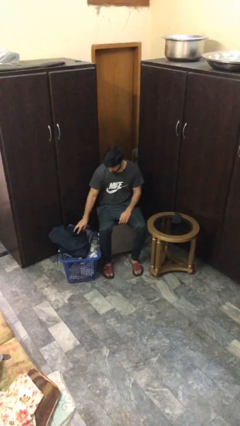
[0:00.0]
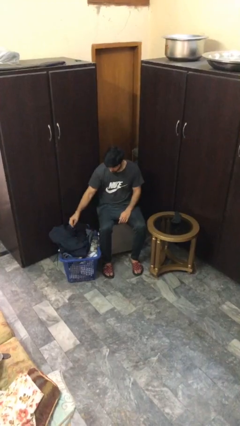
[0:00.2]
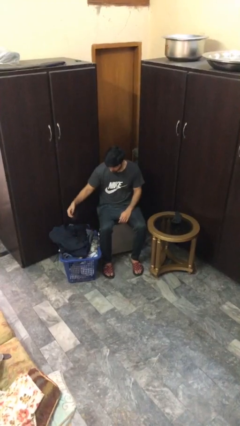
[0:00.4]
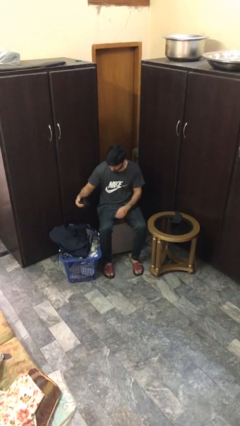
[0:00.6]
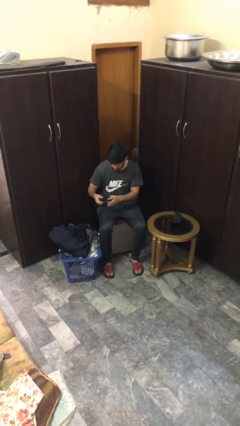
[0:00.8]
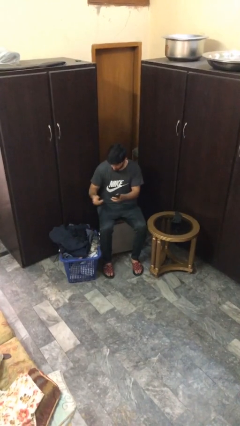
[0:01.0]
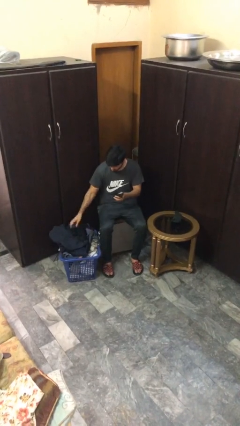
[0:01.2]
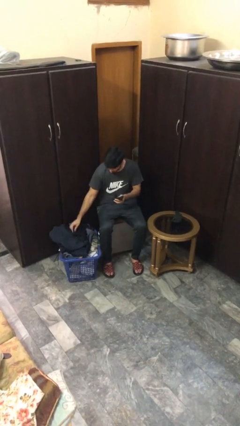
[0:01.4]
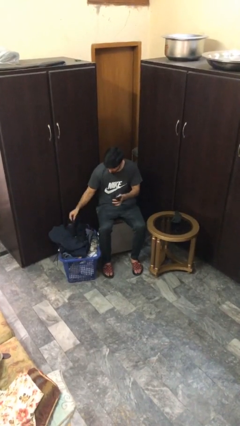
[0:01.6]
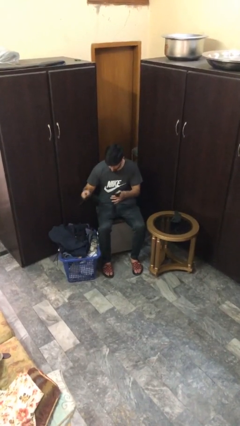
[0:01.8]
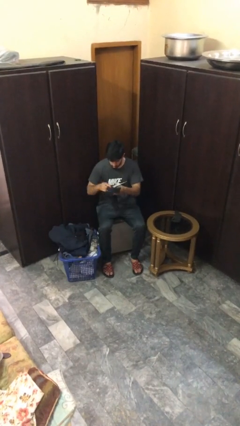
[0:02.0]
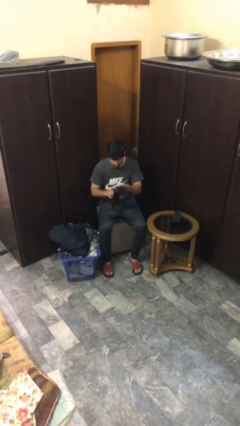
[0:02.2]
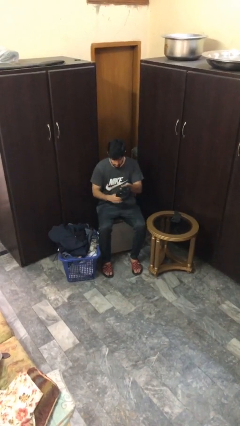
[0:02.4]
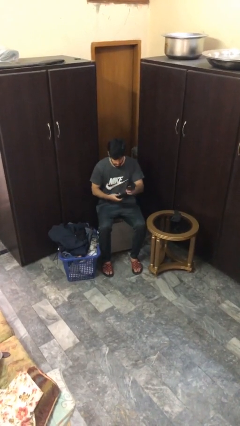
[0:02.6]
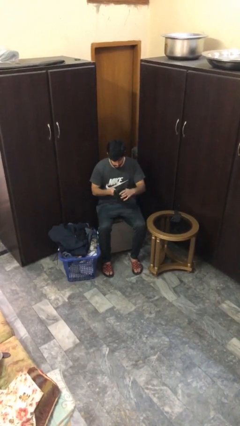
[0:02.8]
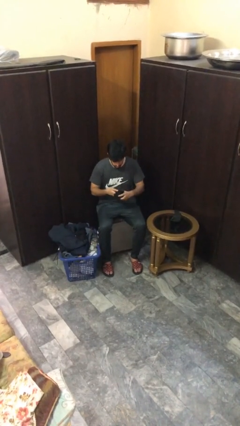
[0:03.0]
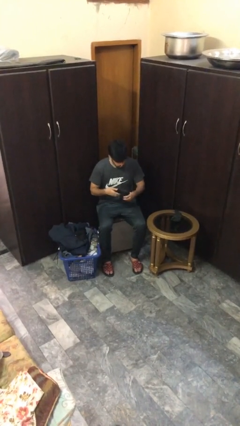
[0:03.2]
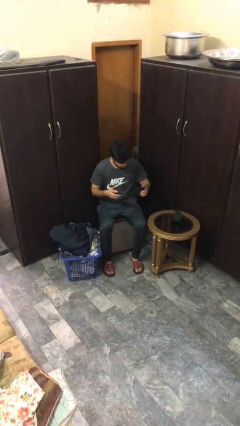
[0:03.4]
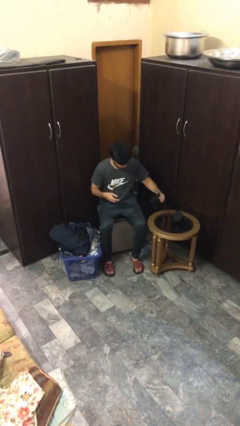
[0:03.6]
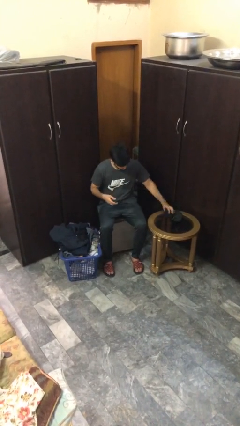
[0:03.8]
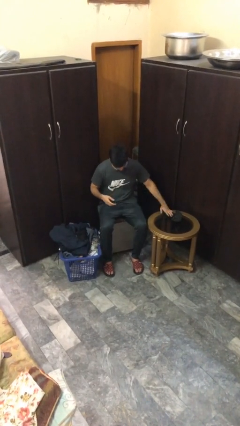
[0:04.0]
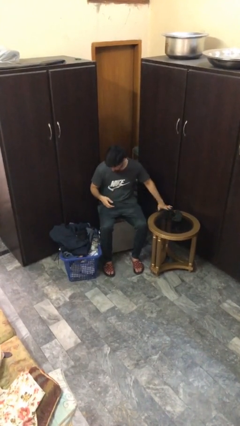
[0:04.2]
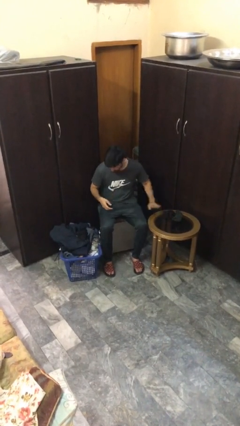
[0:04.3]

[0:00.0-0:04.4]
person folds socks

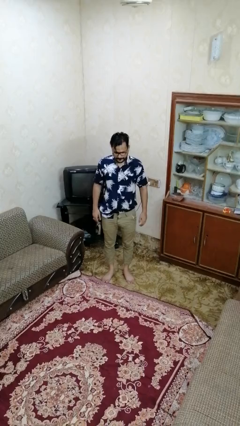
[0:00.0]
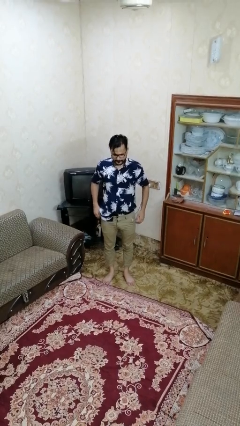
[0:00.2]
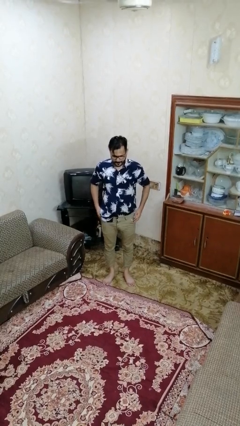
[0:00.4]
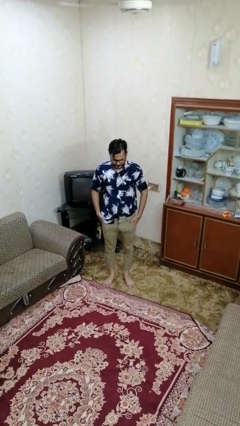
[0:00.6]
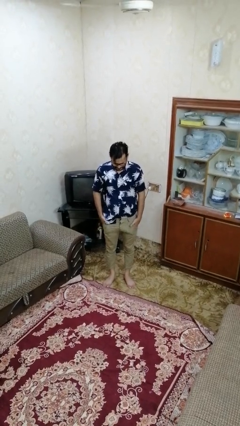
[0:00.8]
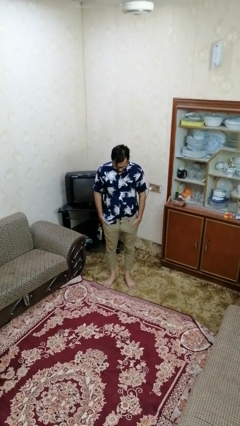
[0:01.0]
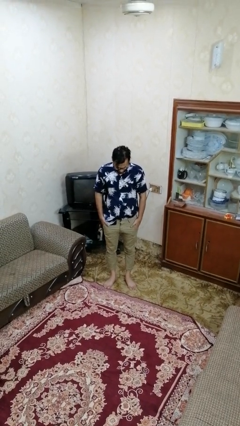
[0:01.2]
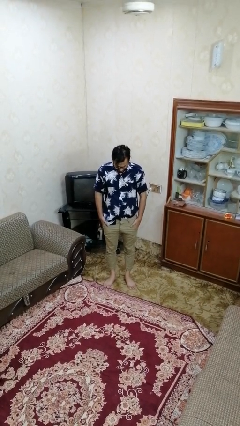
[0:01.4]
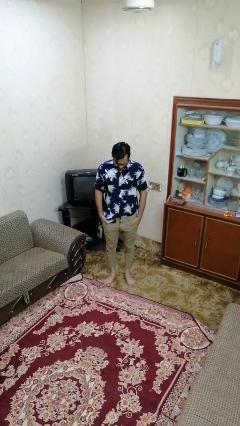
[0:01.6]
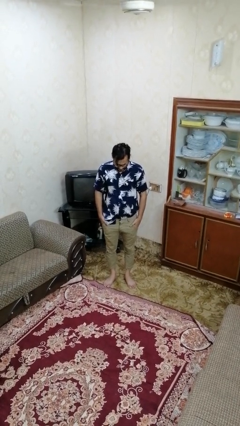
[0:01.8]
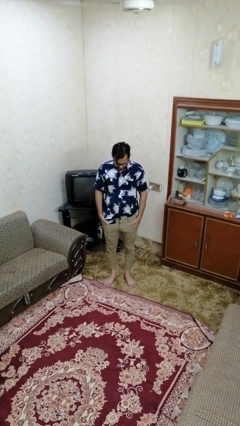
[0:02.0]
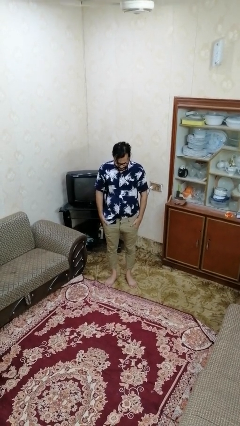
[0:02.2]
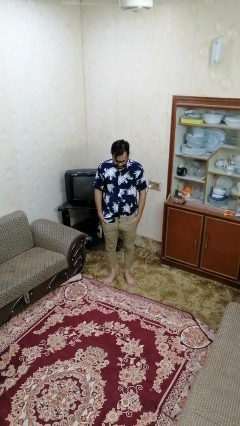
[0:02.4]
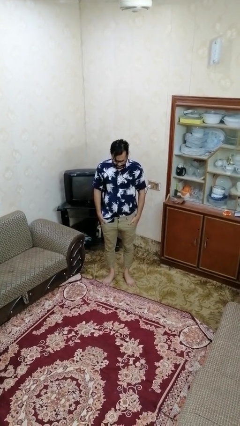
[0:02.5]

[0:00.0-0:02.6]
person puts hands in back pockets

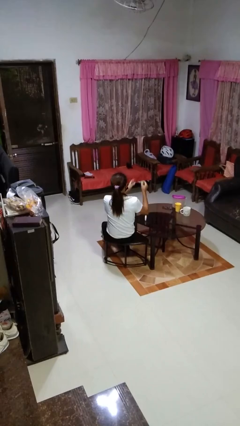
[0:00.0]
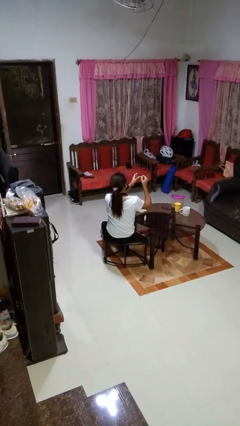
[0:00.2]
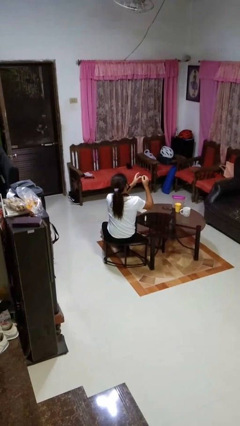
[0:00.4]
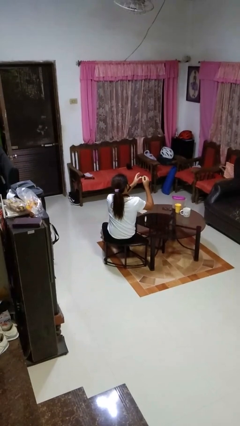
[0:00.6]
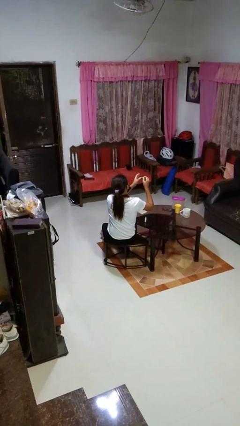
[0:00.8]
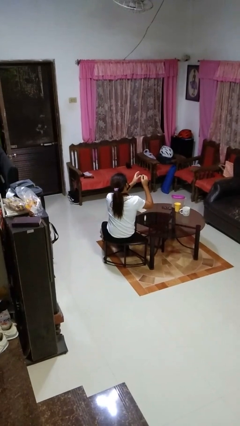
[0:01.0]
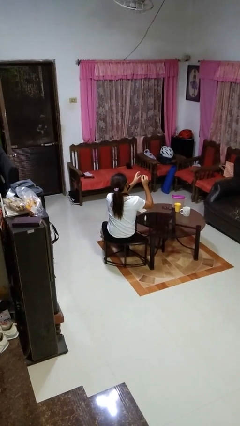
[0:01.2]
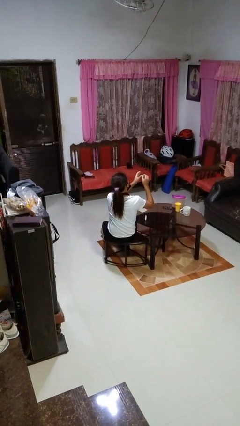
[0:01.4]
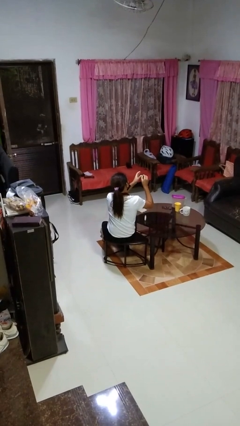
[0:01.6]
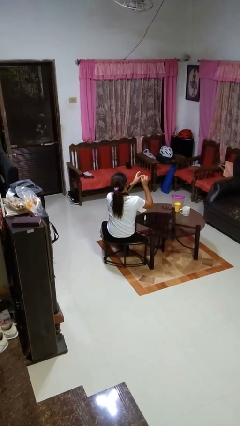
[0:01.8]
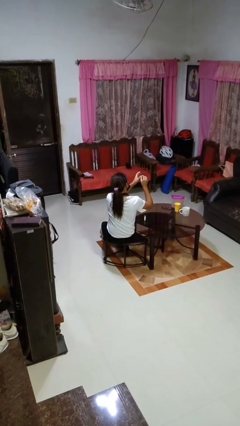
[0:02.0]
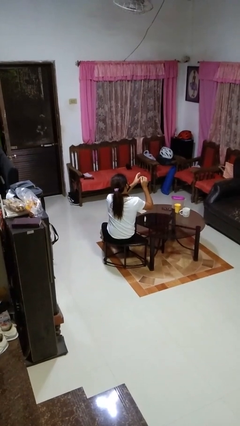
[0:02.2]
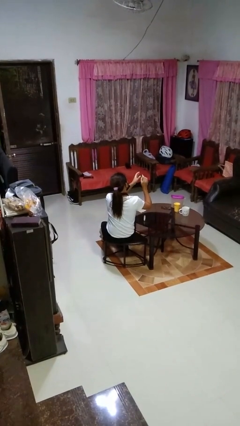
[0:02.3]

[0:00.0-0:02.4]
person paints fingernails

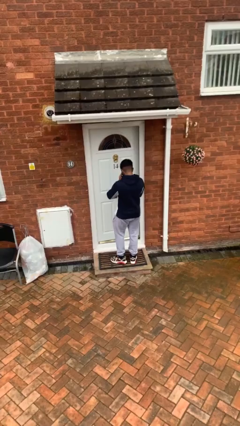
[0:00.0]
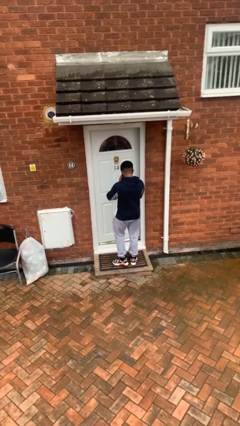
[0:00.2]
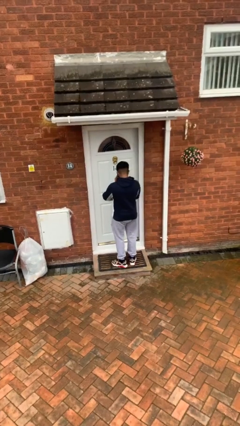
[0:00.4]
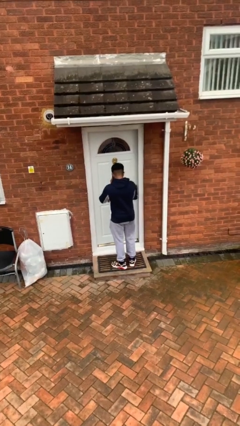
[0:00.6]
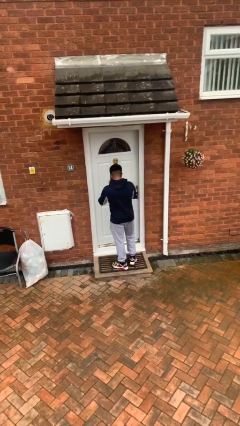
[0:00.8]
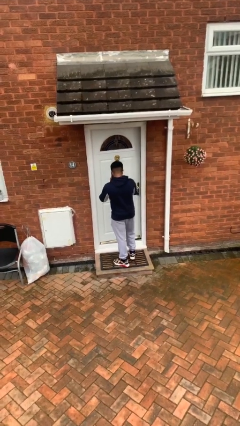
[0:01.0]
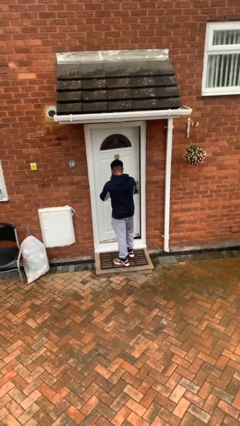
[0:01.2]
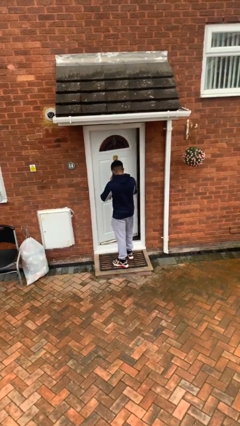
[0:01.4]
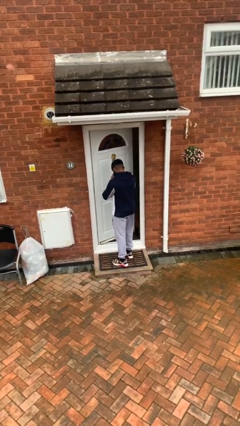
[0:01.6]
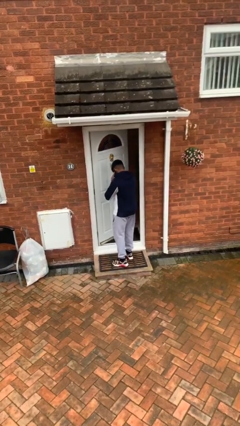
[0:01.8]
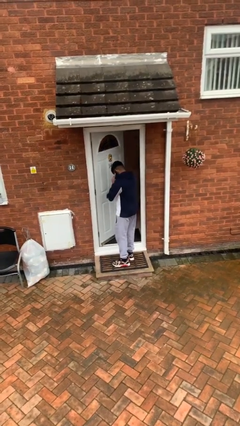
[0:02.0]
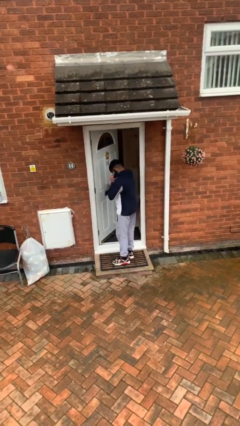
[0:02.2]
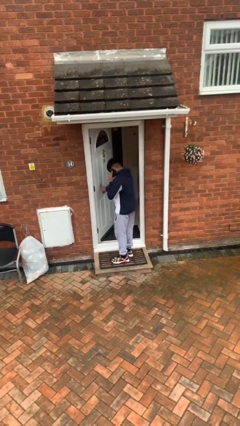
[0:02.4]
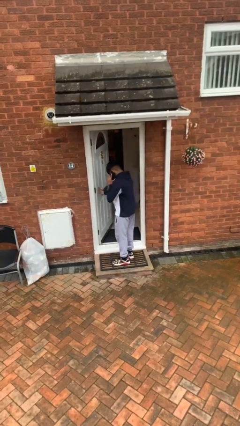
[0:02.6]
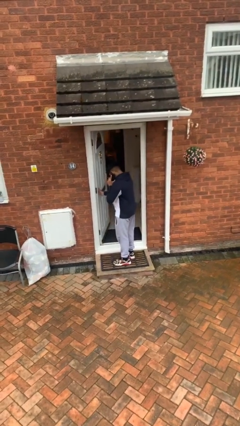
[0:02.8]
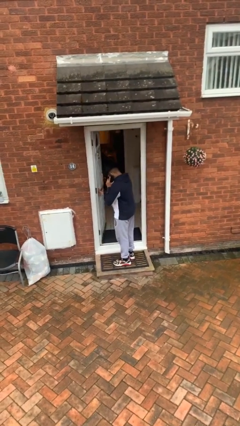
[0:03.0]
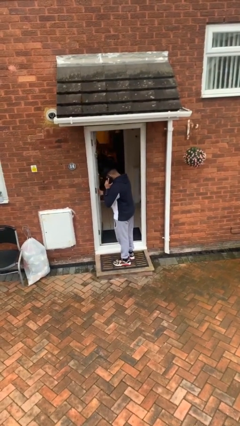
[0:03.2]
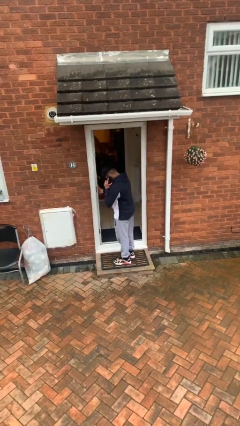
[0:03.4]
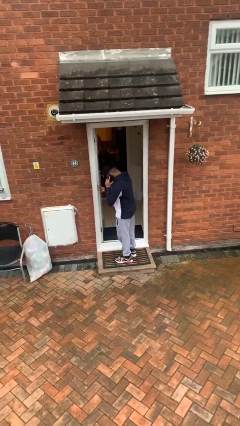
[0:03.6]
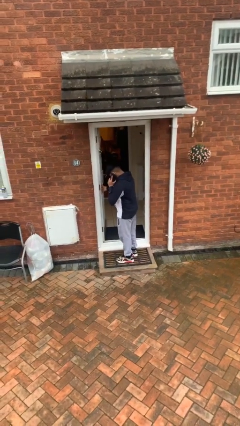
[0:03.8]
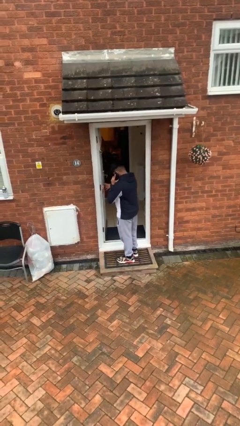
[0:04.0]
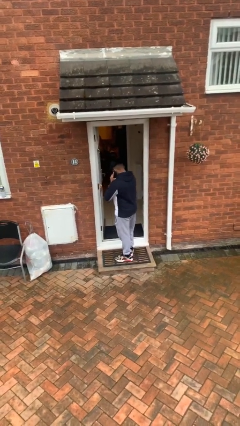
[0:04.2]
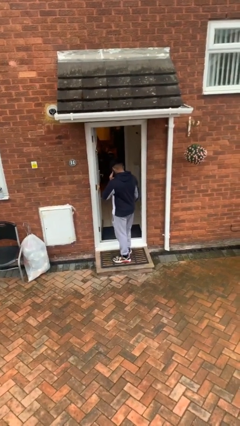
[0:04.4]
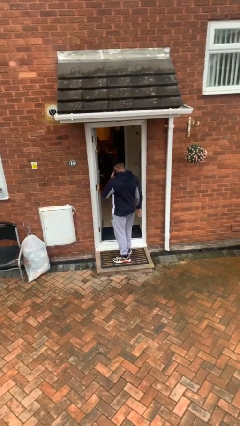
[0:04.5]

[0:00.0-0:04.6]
person opens facility door

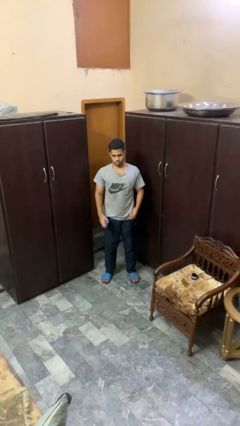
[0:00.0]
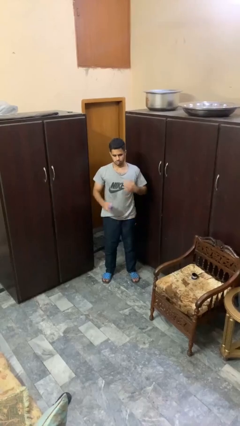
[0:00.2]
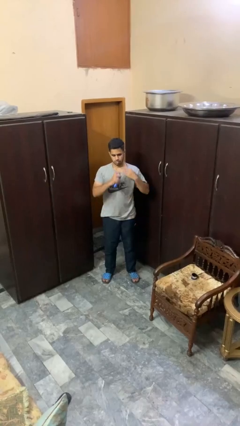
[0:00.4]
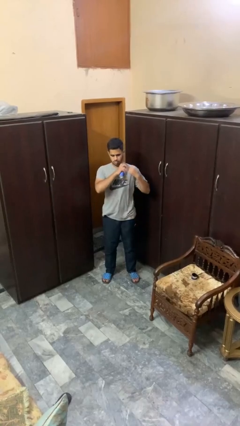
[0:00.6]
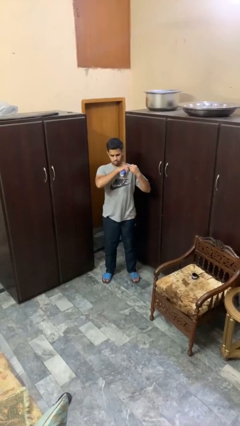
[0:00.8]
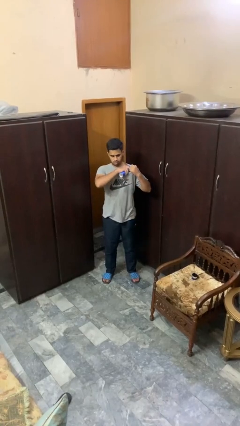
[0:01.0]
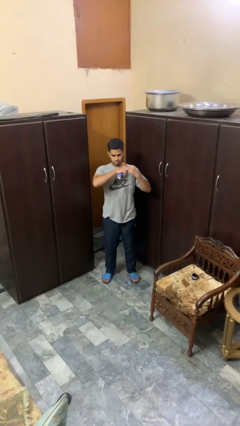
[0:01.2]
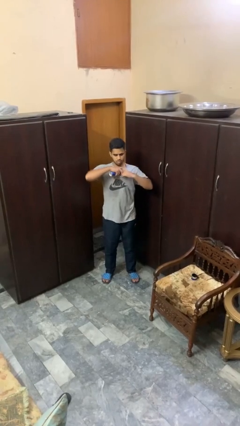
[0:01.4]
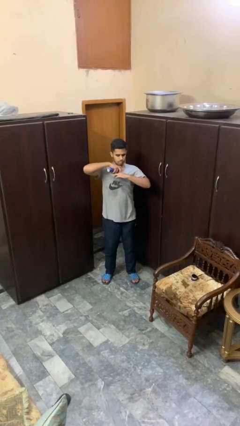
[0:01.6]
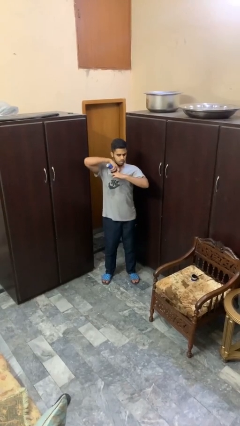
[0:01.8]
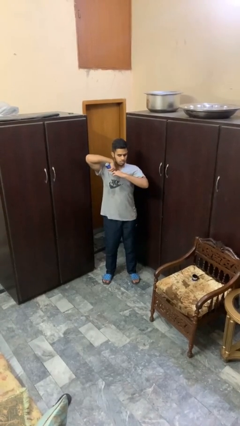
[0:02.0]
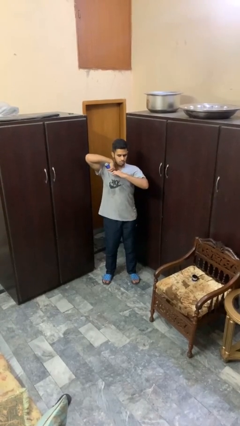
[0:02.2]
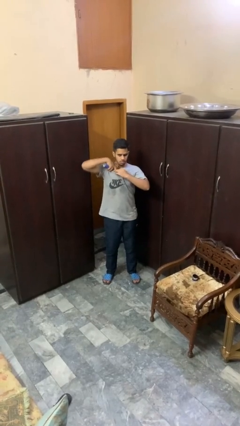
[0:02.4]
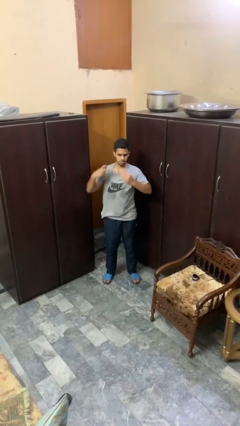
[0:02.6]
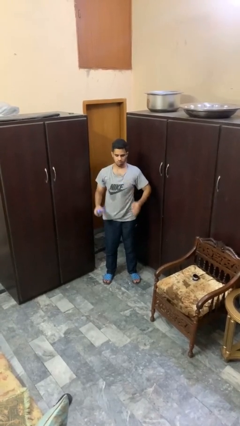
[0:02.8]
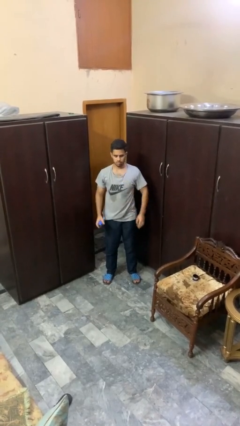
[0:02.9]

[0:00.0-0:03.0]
person applies deodorant

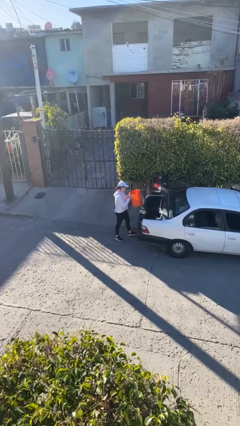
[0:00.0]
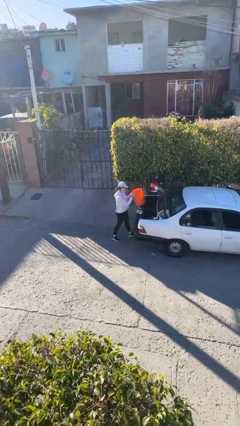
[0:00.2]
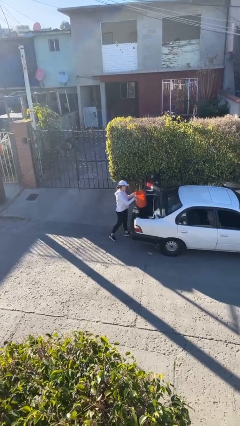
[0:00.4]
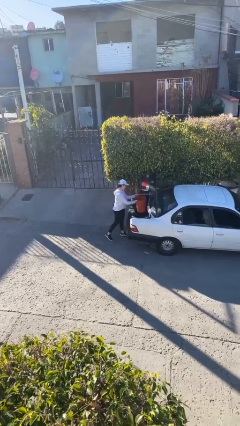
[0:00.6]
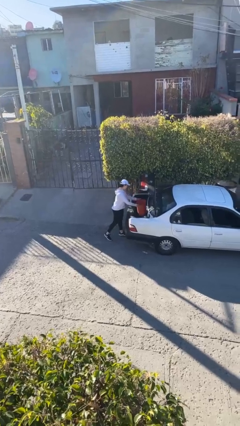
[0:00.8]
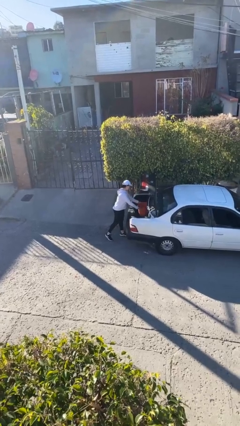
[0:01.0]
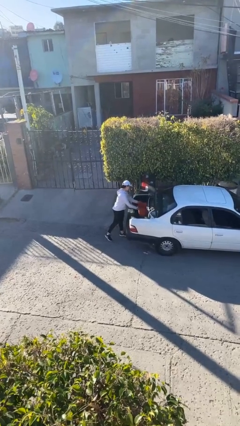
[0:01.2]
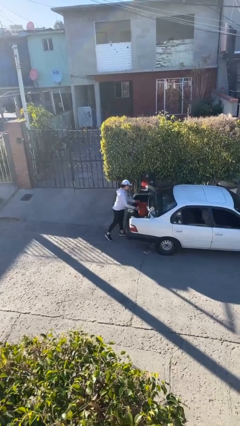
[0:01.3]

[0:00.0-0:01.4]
person loads car
